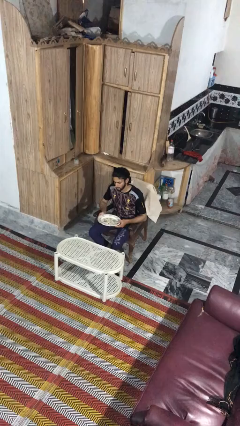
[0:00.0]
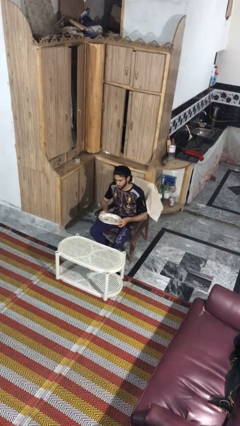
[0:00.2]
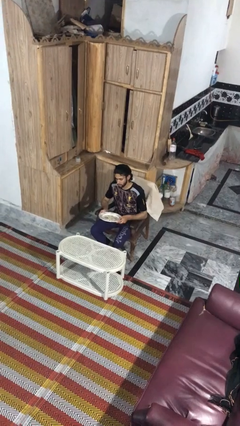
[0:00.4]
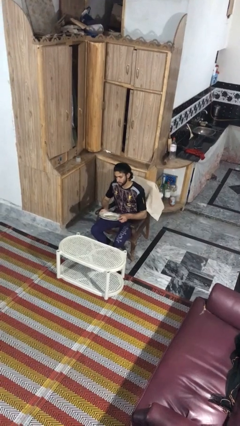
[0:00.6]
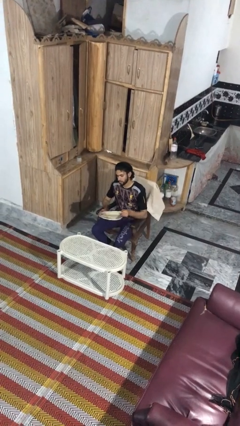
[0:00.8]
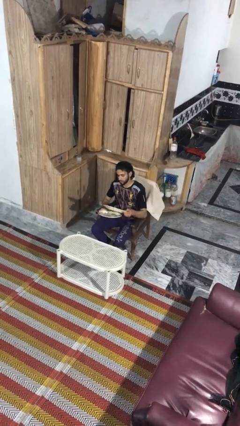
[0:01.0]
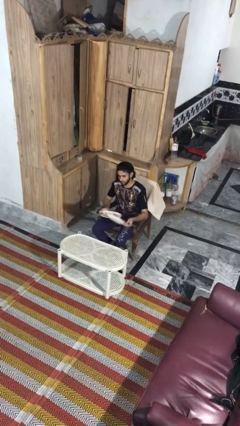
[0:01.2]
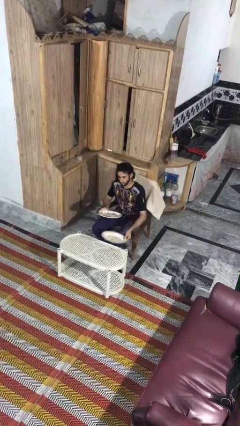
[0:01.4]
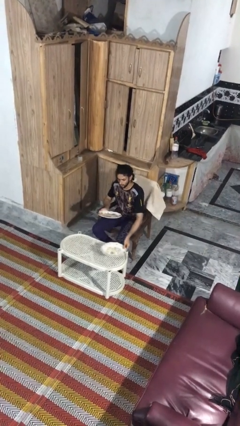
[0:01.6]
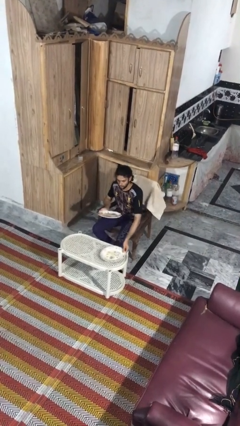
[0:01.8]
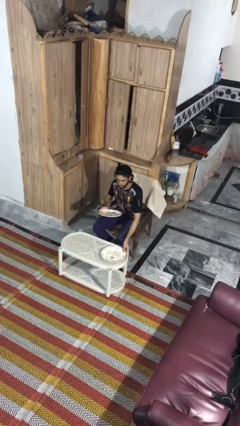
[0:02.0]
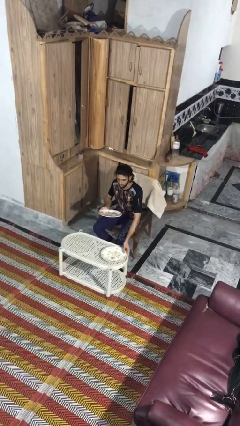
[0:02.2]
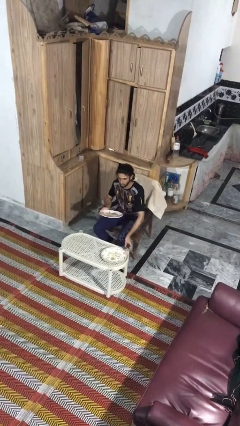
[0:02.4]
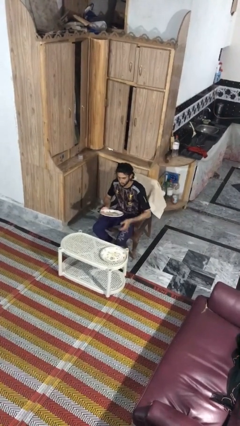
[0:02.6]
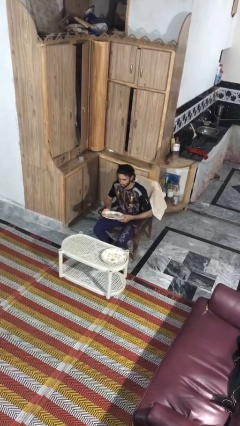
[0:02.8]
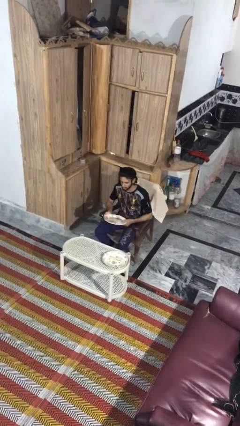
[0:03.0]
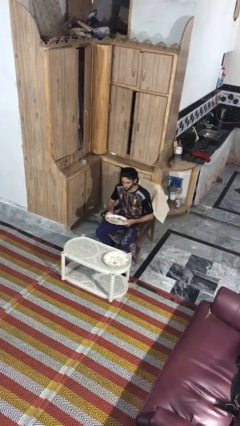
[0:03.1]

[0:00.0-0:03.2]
person sets table

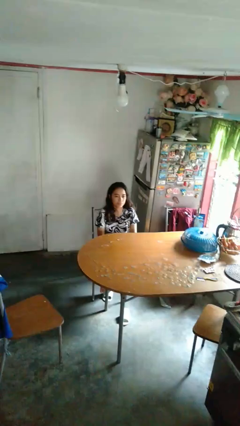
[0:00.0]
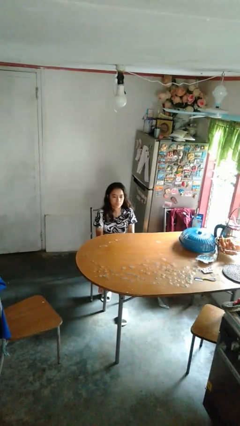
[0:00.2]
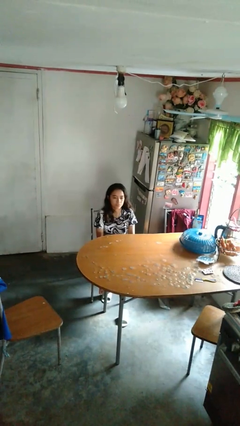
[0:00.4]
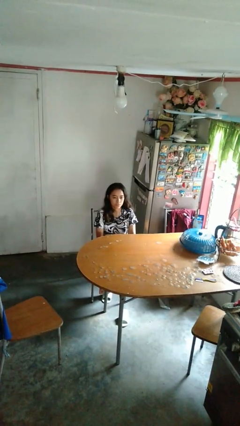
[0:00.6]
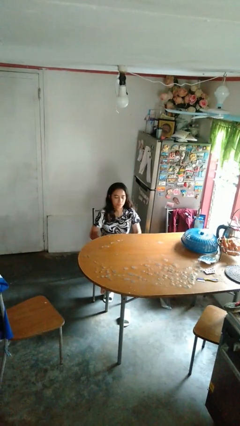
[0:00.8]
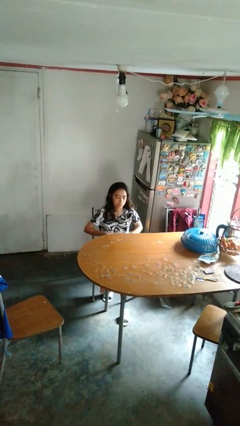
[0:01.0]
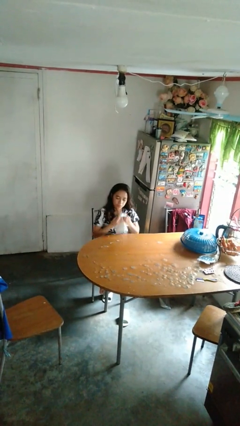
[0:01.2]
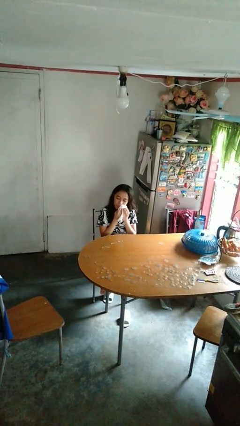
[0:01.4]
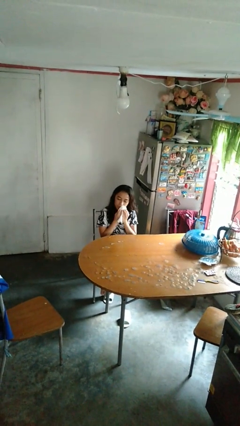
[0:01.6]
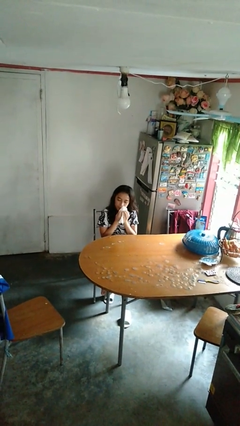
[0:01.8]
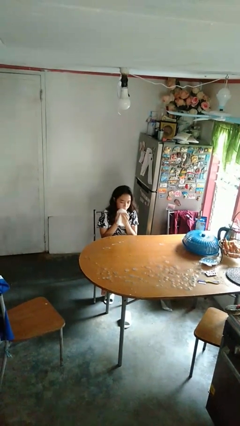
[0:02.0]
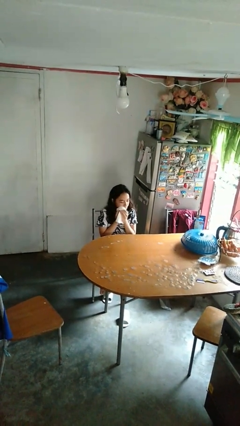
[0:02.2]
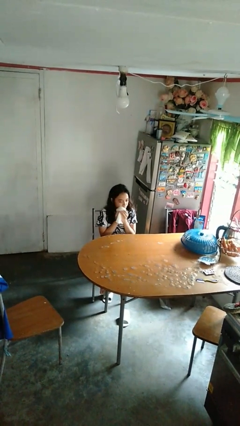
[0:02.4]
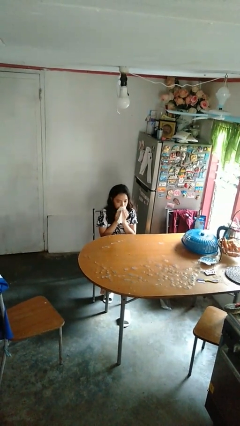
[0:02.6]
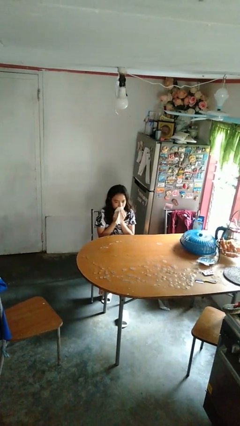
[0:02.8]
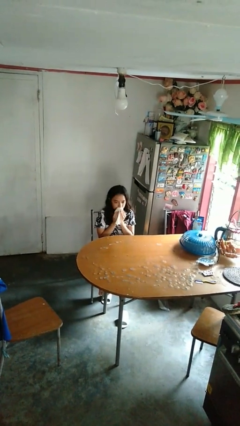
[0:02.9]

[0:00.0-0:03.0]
person wipes mouth with napkin

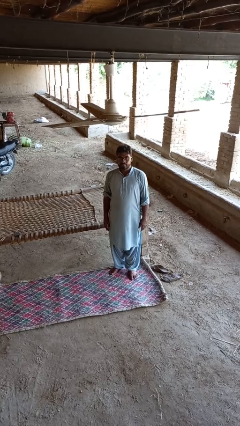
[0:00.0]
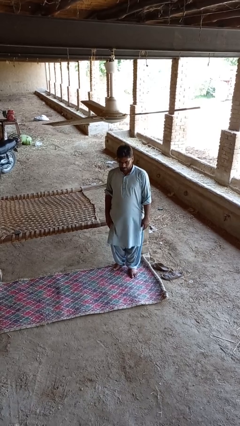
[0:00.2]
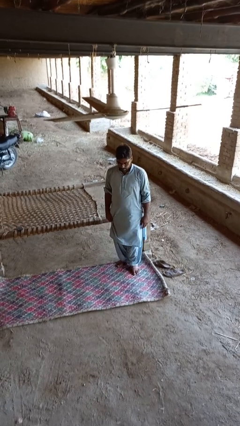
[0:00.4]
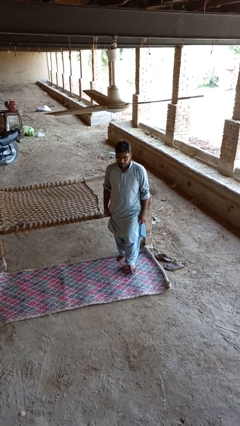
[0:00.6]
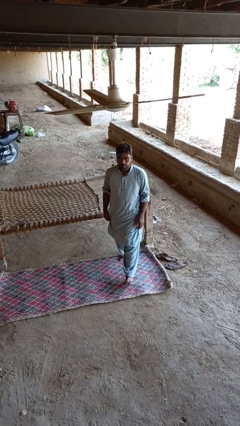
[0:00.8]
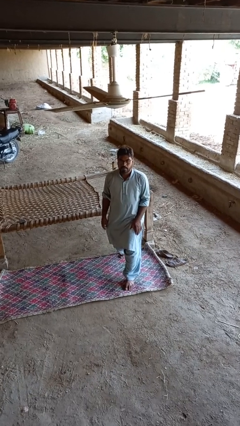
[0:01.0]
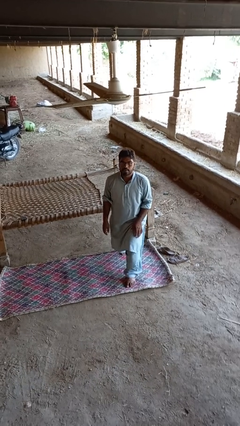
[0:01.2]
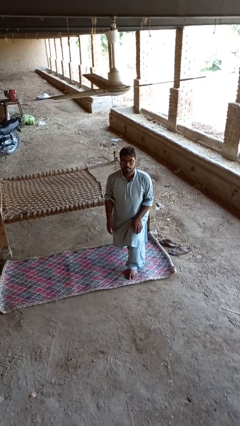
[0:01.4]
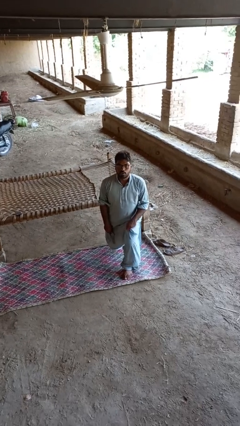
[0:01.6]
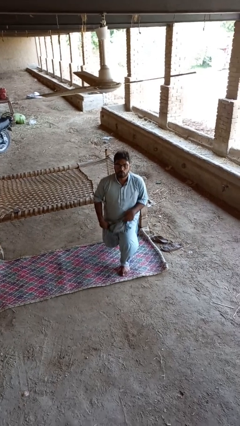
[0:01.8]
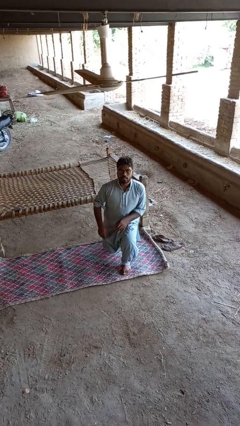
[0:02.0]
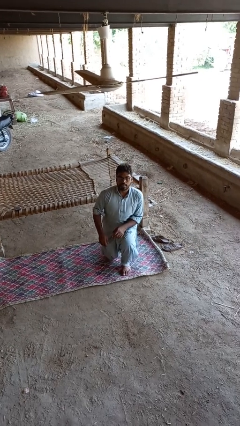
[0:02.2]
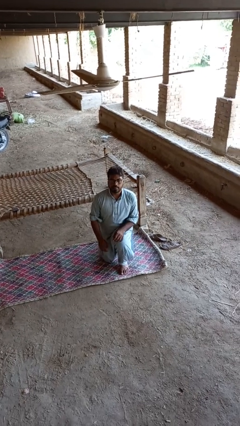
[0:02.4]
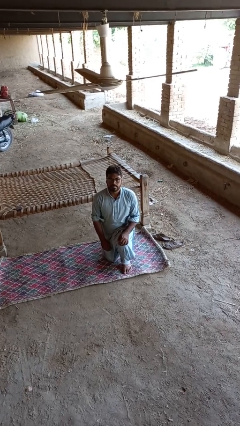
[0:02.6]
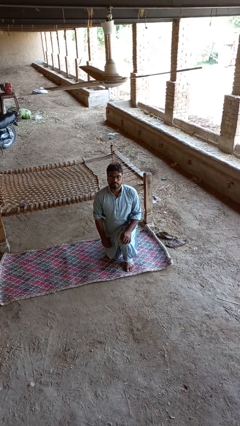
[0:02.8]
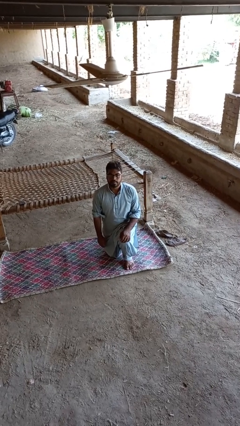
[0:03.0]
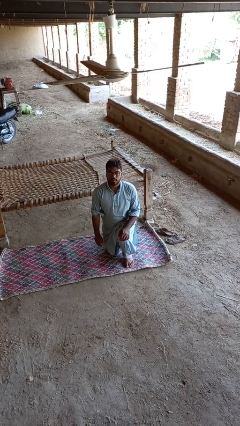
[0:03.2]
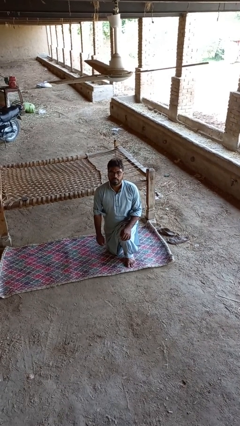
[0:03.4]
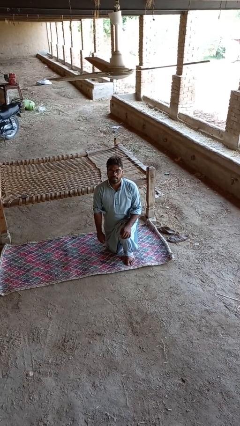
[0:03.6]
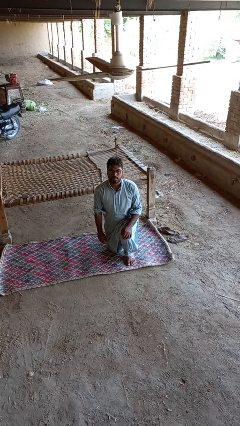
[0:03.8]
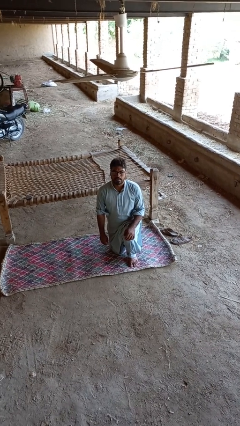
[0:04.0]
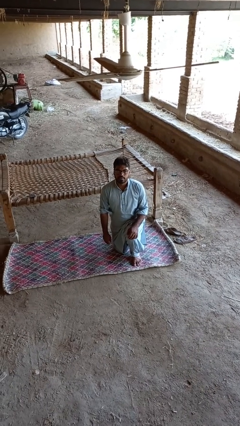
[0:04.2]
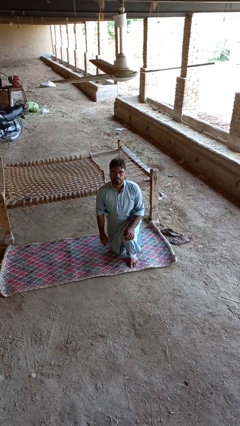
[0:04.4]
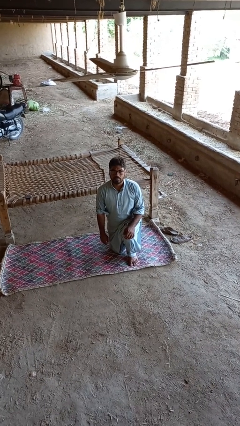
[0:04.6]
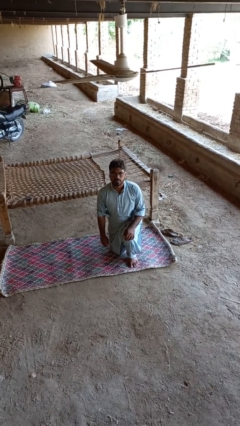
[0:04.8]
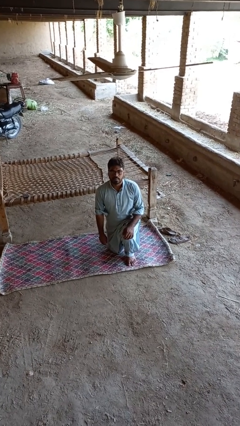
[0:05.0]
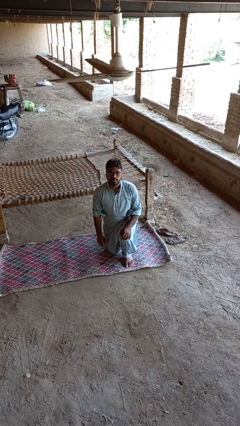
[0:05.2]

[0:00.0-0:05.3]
person kneels

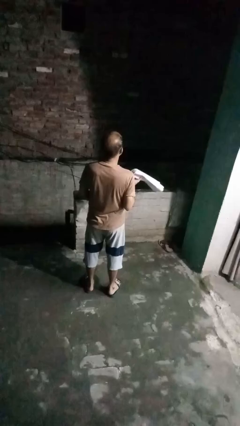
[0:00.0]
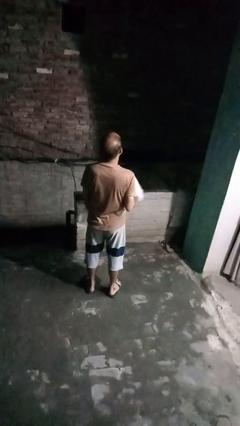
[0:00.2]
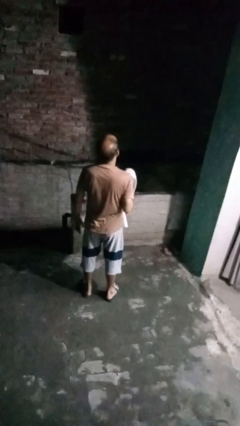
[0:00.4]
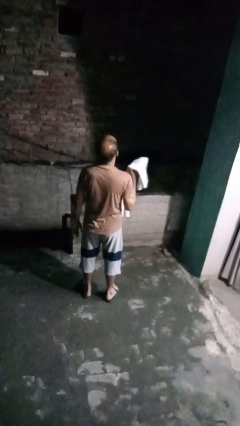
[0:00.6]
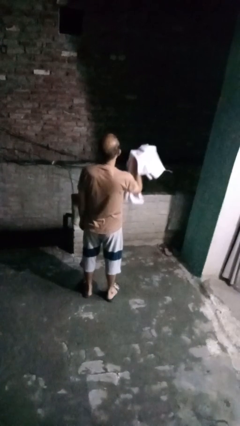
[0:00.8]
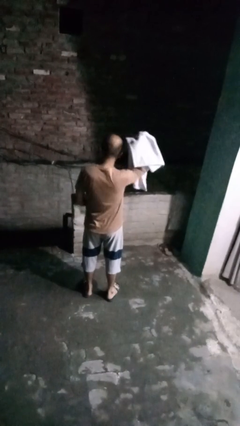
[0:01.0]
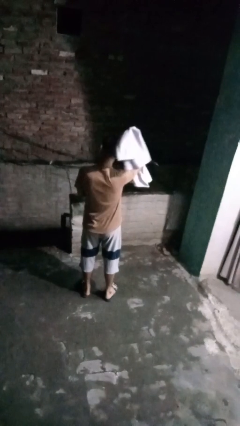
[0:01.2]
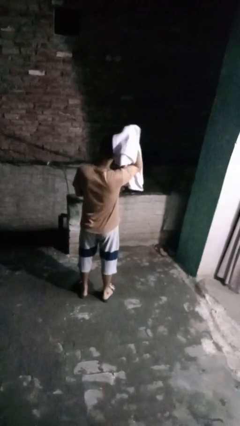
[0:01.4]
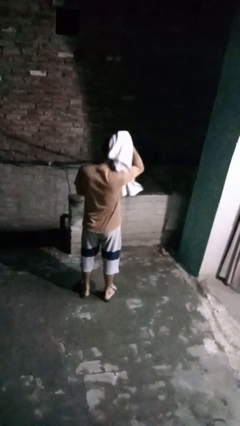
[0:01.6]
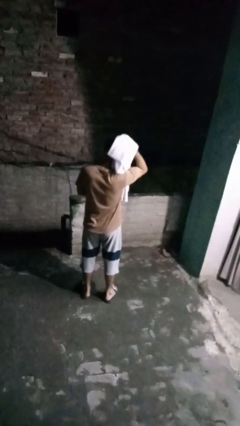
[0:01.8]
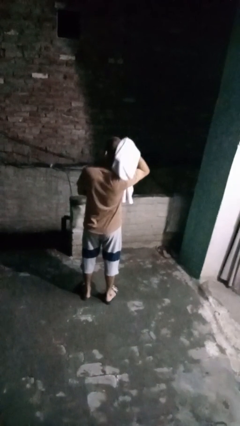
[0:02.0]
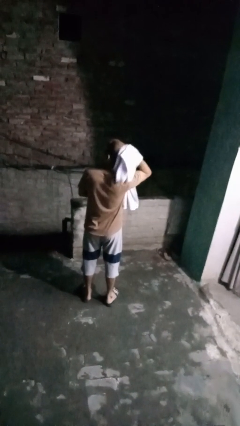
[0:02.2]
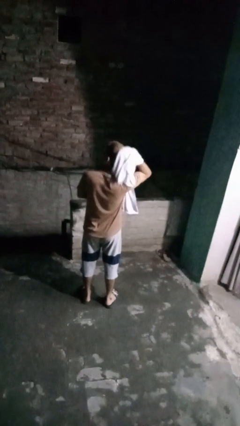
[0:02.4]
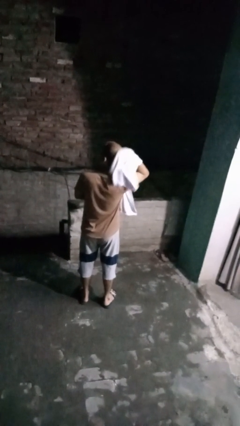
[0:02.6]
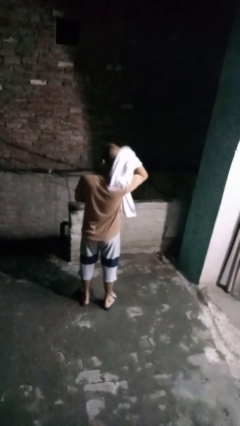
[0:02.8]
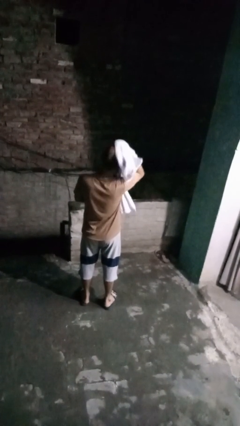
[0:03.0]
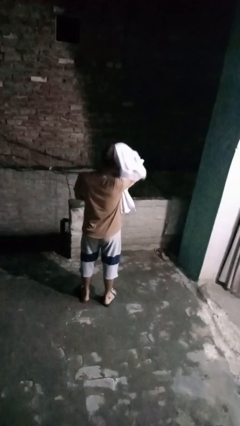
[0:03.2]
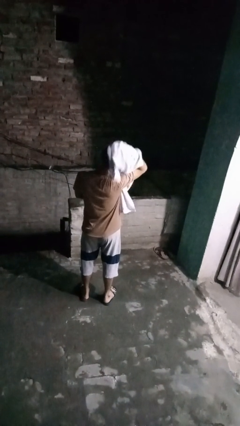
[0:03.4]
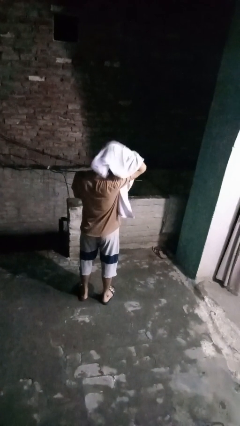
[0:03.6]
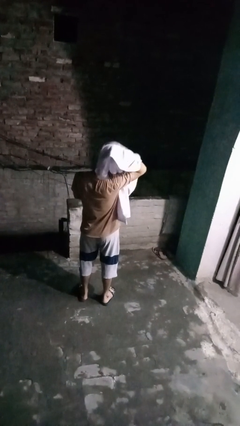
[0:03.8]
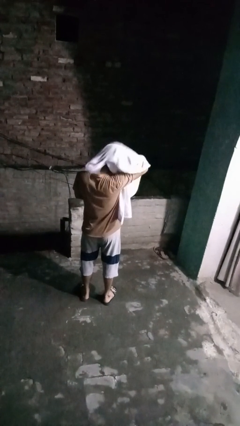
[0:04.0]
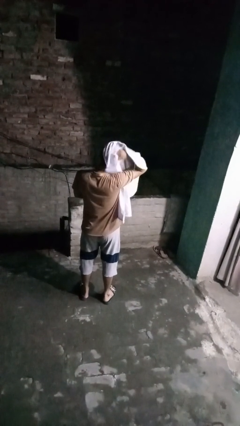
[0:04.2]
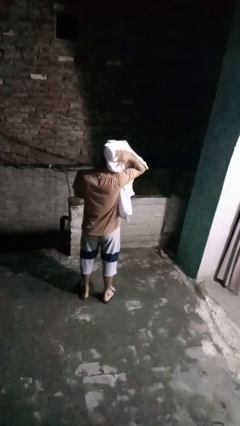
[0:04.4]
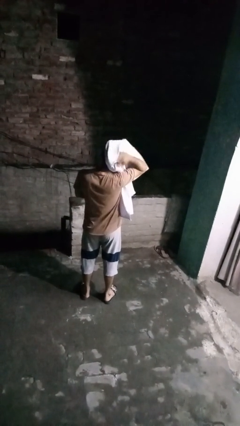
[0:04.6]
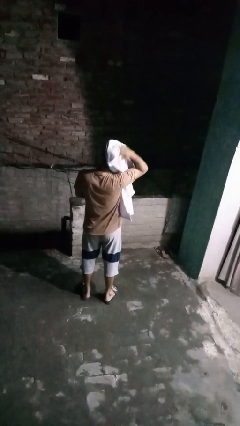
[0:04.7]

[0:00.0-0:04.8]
person dries hair with towel

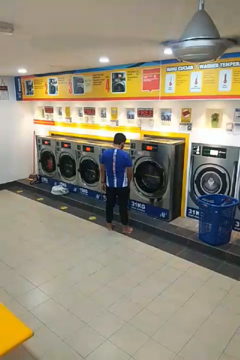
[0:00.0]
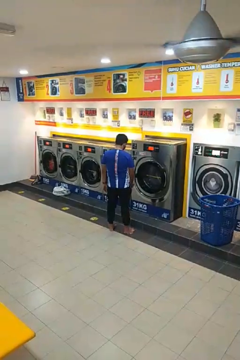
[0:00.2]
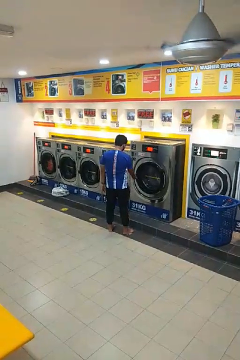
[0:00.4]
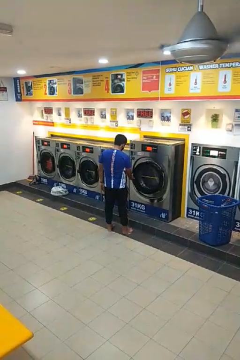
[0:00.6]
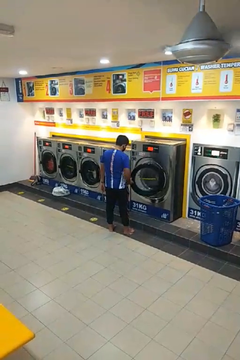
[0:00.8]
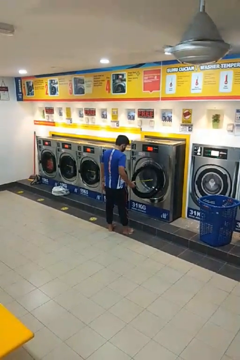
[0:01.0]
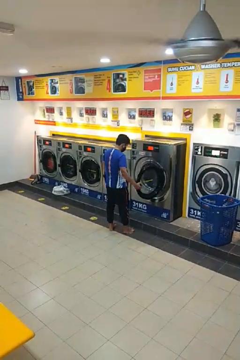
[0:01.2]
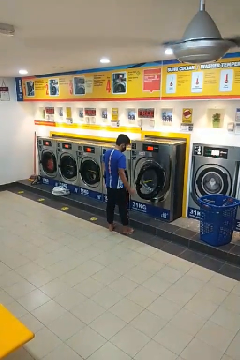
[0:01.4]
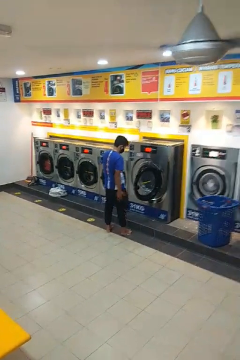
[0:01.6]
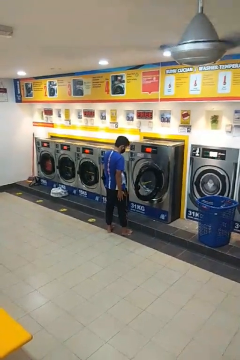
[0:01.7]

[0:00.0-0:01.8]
person opens clothes washer
